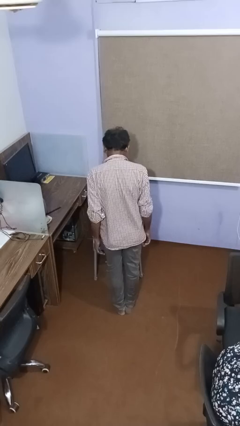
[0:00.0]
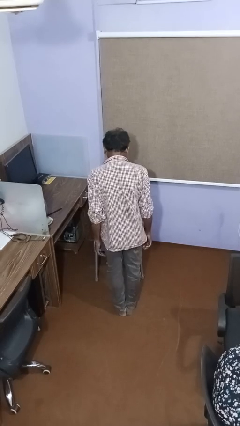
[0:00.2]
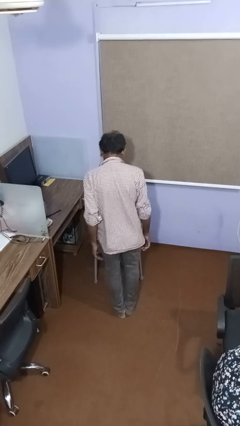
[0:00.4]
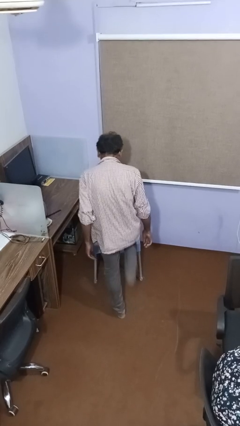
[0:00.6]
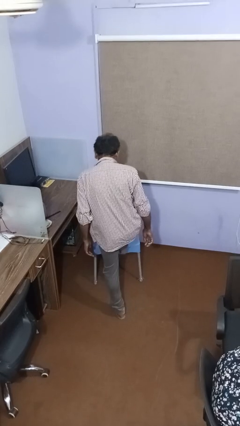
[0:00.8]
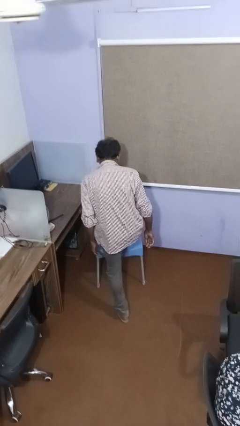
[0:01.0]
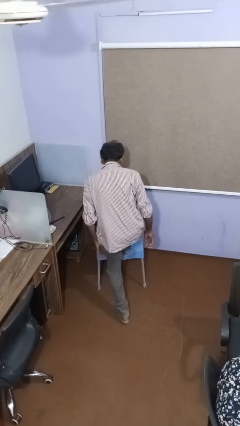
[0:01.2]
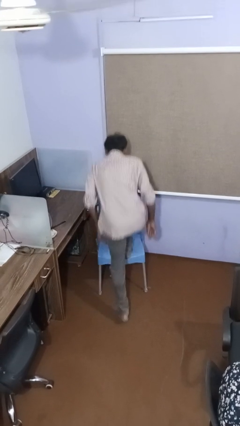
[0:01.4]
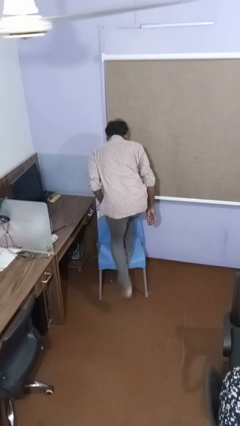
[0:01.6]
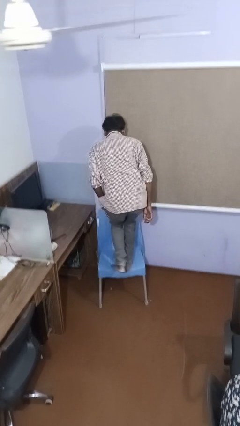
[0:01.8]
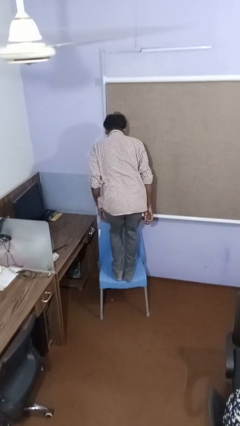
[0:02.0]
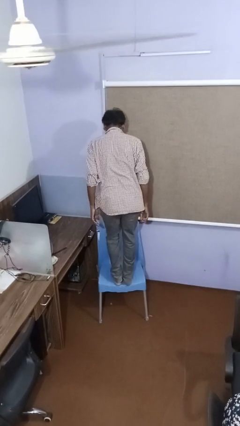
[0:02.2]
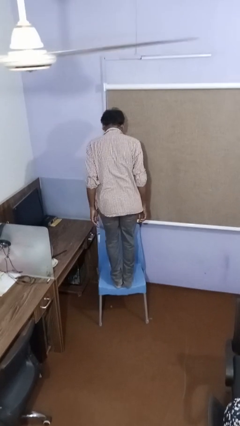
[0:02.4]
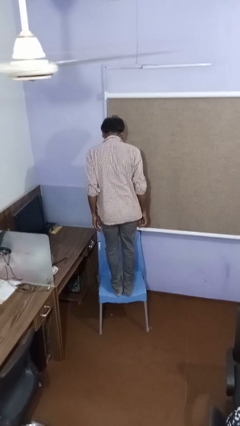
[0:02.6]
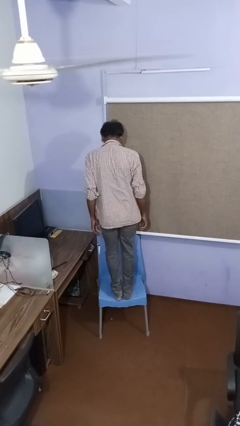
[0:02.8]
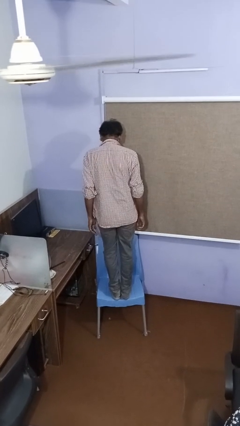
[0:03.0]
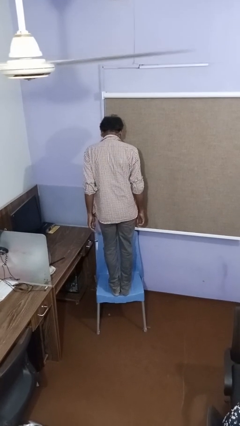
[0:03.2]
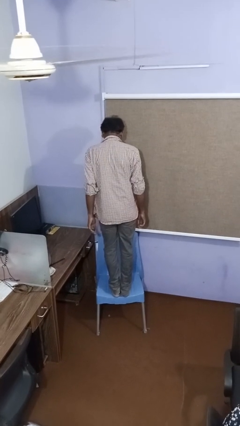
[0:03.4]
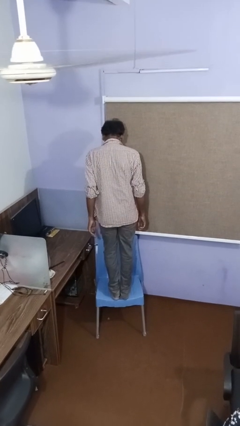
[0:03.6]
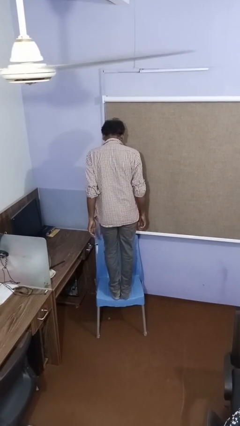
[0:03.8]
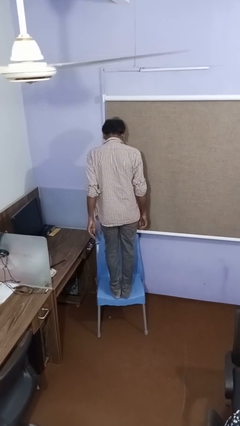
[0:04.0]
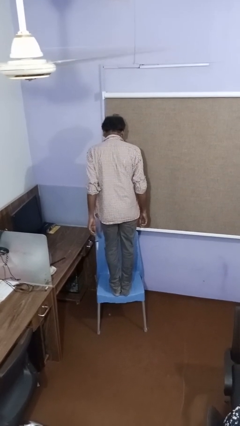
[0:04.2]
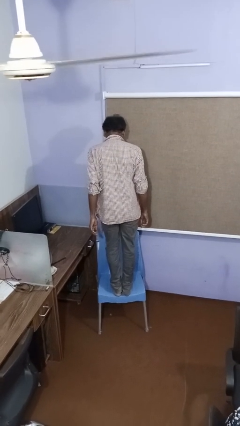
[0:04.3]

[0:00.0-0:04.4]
person climbs on chair

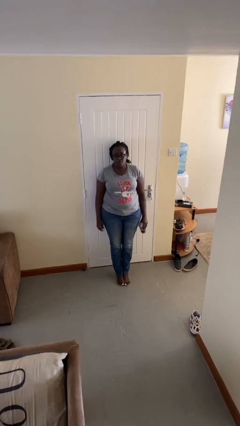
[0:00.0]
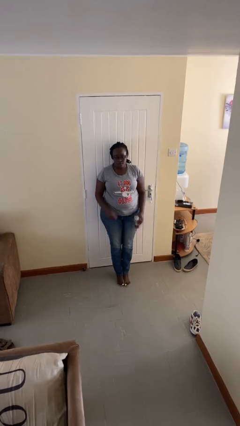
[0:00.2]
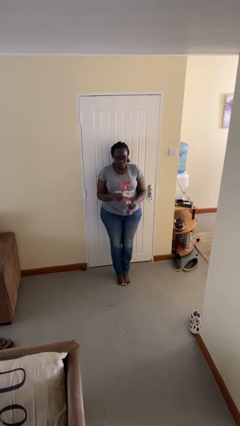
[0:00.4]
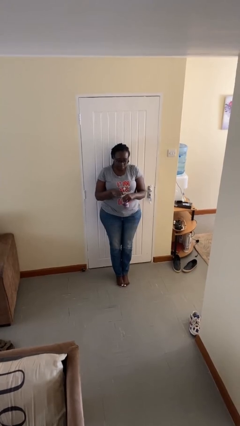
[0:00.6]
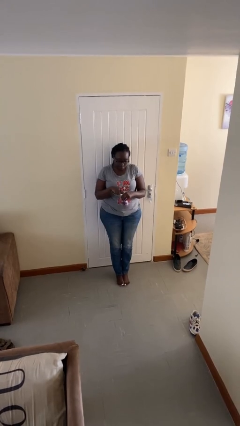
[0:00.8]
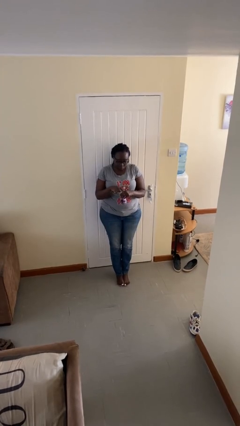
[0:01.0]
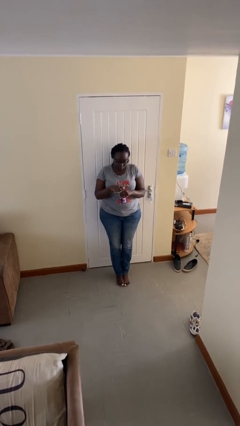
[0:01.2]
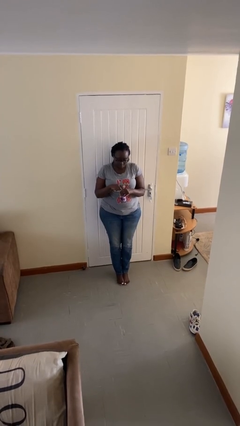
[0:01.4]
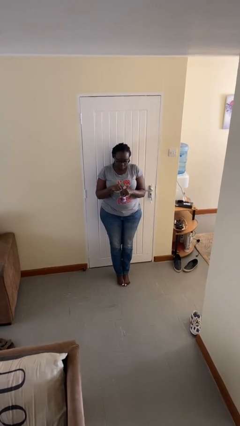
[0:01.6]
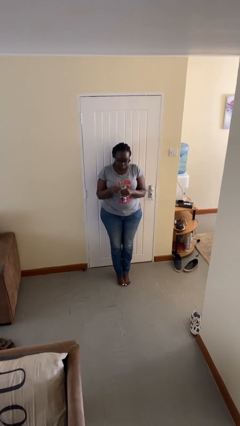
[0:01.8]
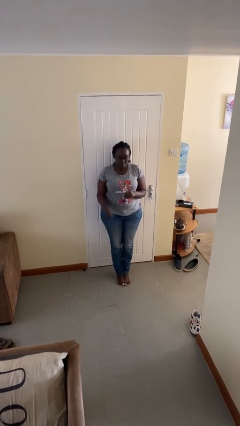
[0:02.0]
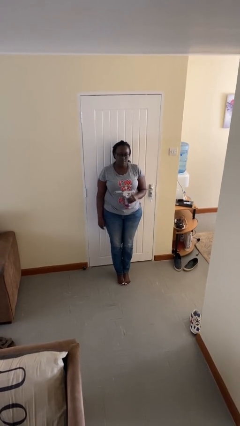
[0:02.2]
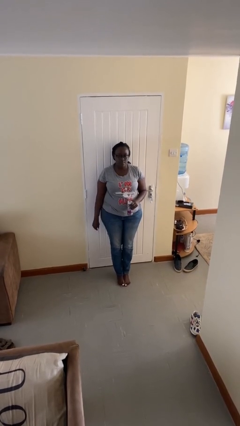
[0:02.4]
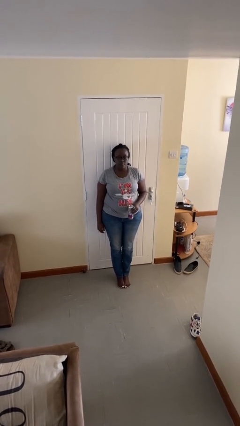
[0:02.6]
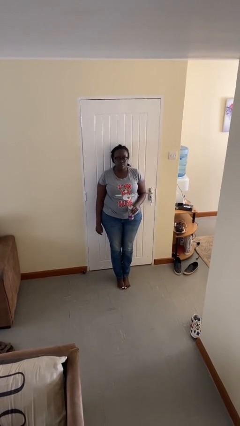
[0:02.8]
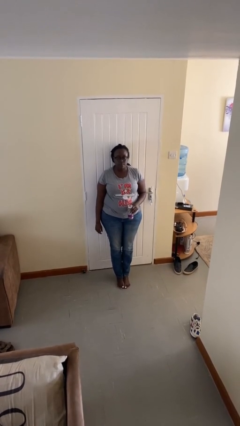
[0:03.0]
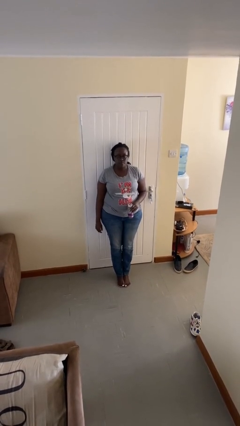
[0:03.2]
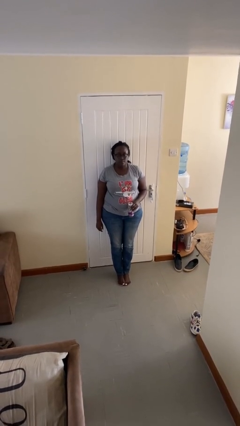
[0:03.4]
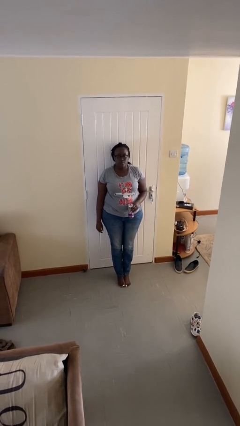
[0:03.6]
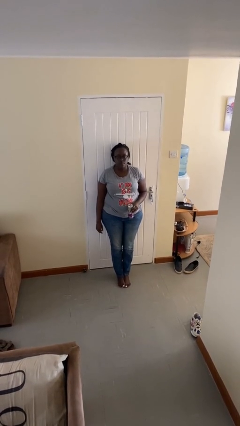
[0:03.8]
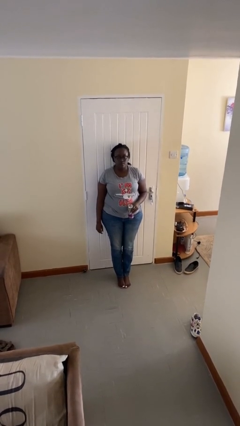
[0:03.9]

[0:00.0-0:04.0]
person opens beverage can

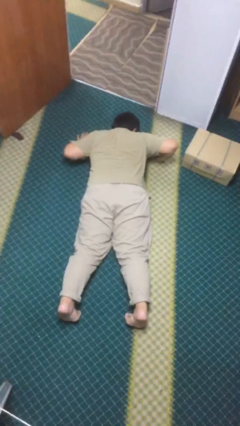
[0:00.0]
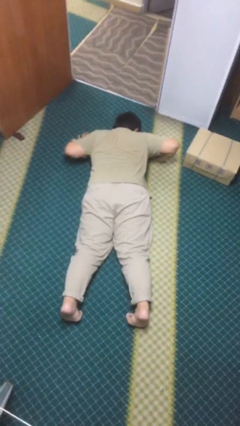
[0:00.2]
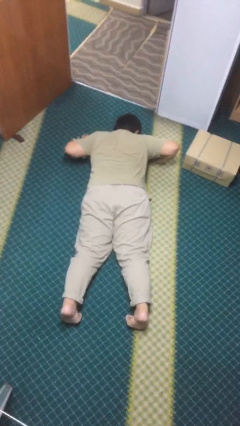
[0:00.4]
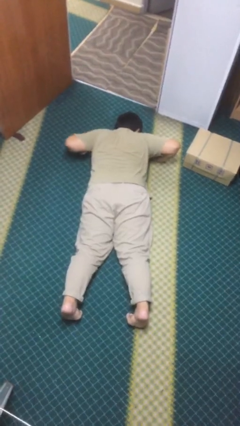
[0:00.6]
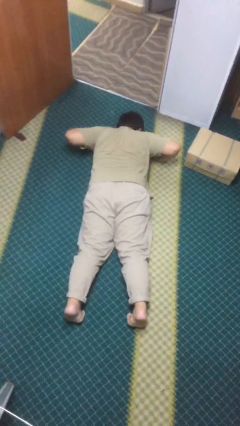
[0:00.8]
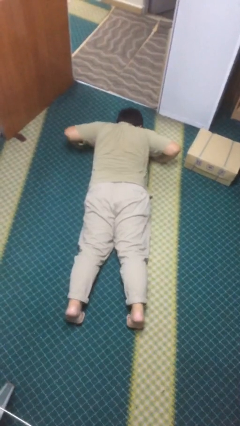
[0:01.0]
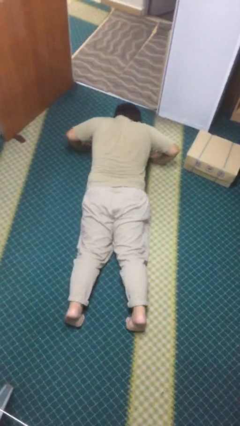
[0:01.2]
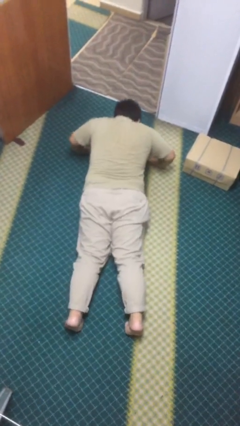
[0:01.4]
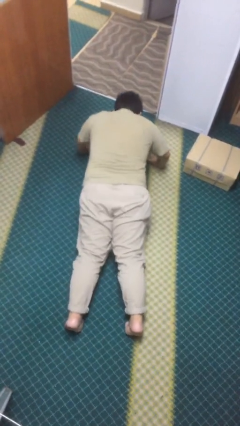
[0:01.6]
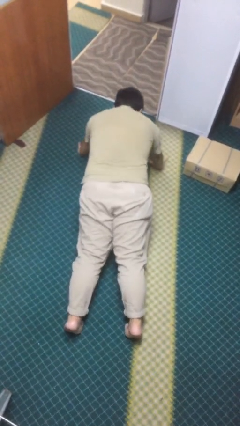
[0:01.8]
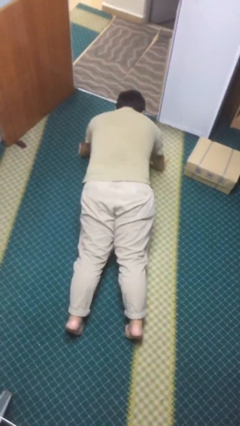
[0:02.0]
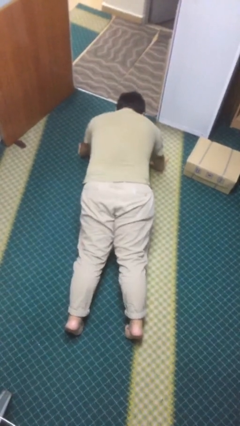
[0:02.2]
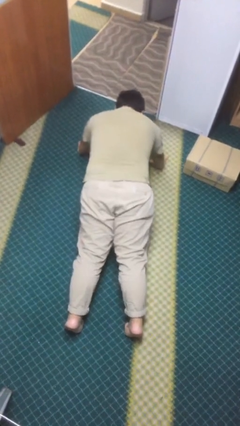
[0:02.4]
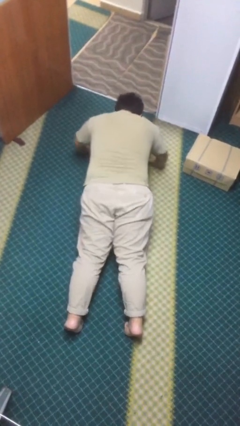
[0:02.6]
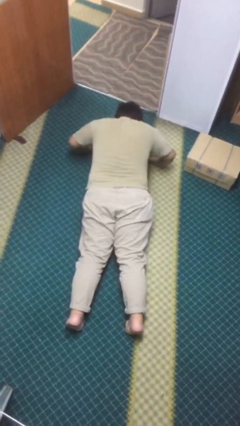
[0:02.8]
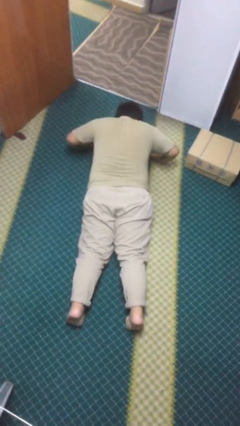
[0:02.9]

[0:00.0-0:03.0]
person exercises with pushup

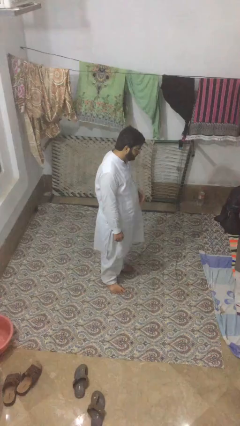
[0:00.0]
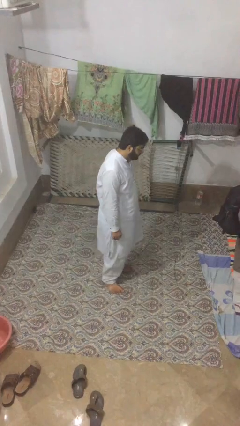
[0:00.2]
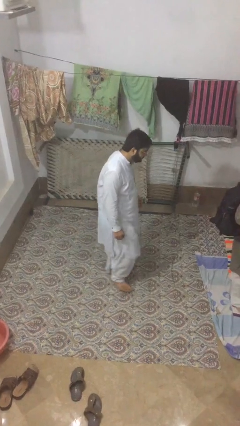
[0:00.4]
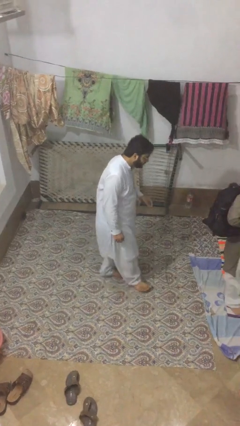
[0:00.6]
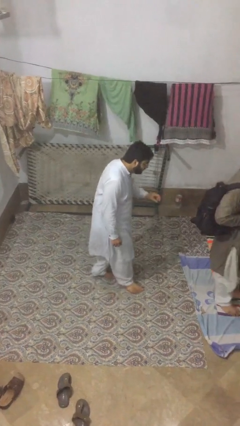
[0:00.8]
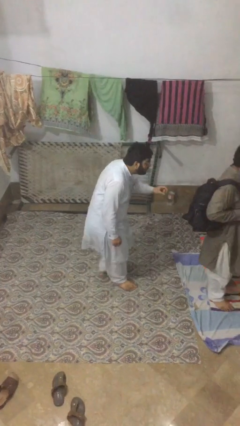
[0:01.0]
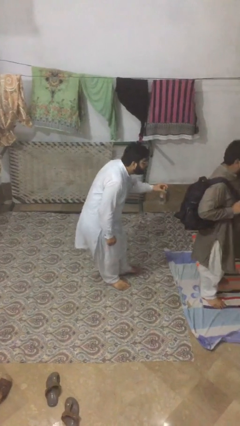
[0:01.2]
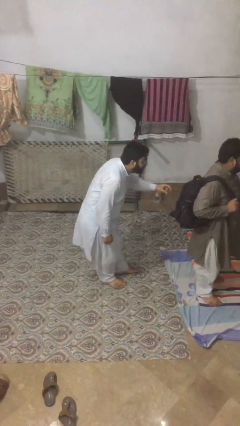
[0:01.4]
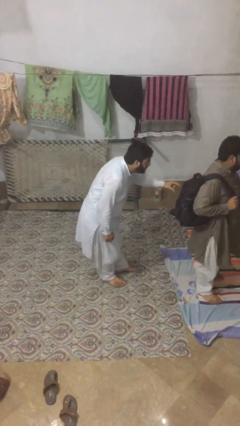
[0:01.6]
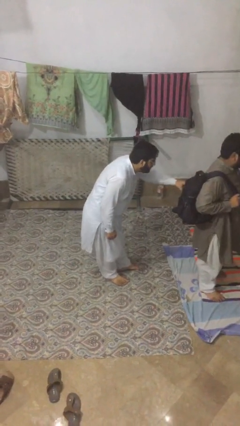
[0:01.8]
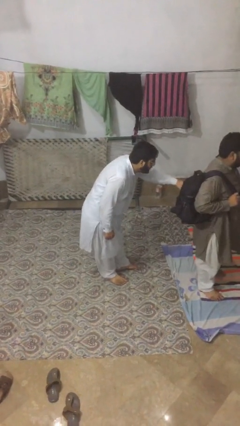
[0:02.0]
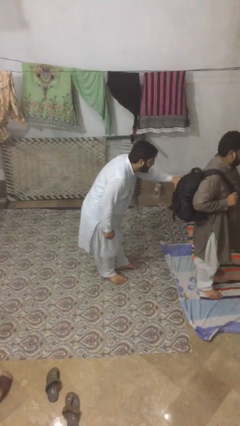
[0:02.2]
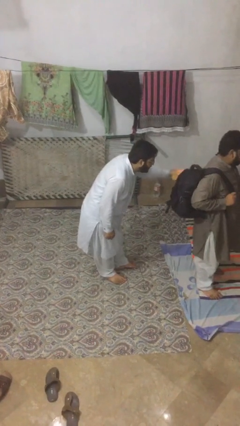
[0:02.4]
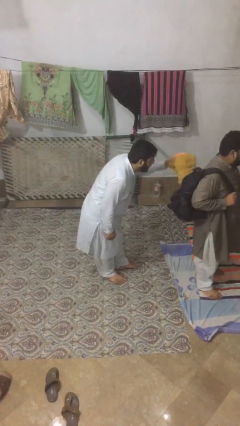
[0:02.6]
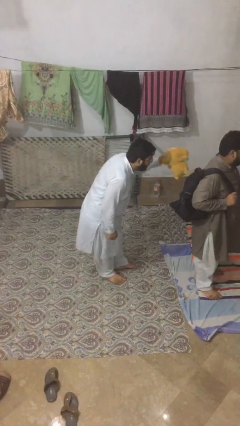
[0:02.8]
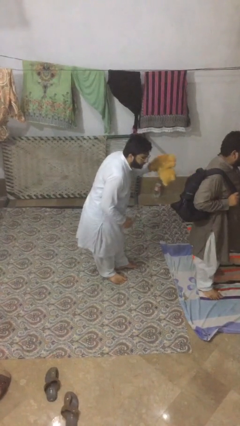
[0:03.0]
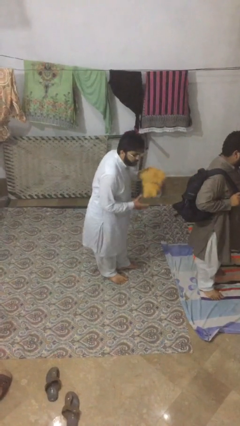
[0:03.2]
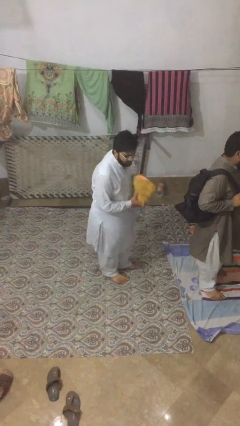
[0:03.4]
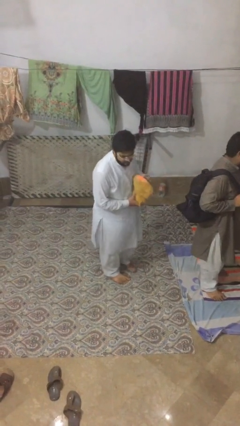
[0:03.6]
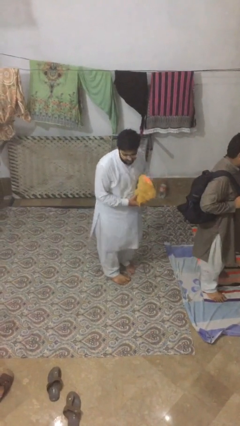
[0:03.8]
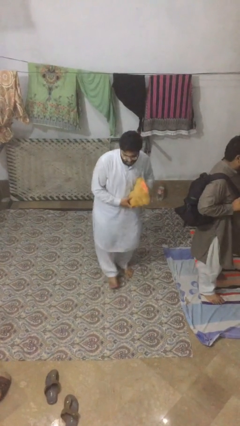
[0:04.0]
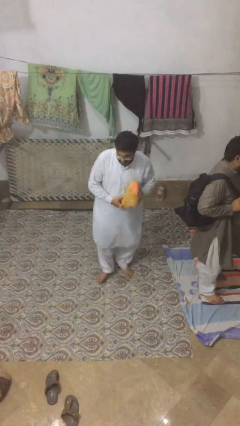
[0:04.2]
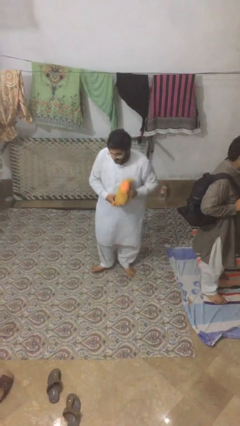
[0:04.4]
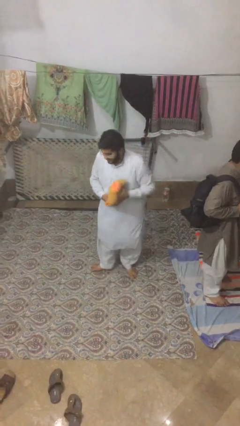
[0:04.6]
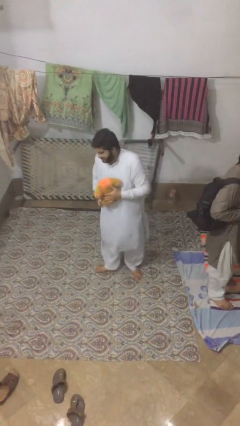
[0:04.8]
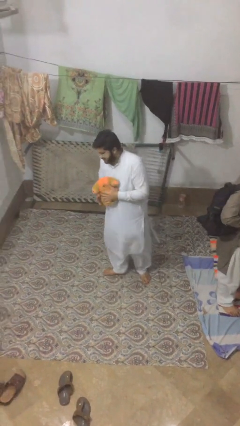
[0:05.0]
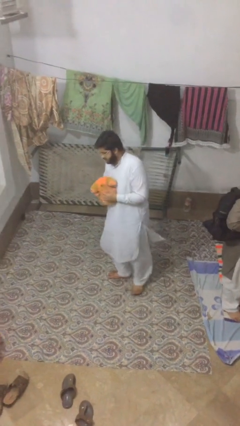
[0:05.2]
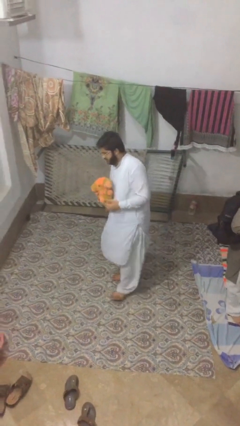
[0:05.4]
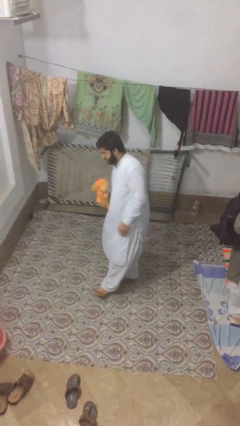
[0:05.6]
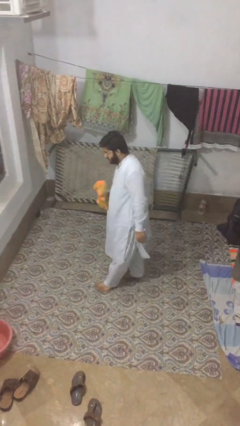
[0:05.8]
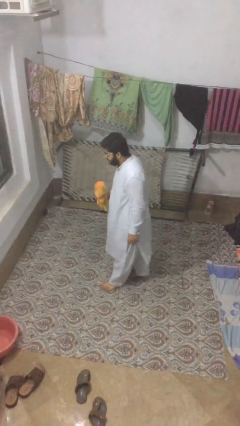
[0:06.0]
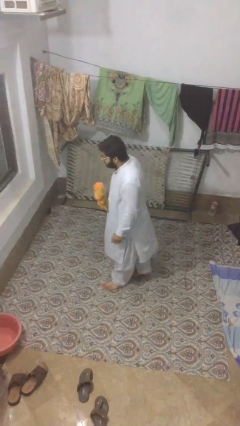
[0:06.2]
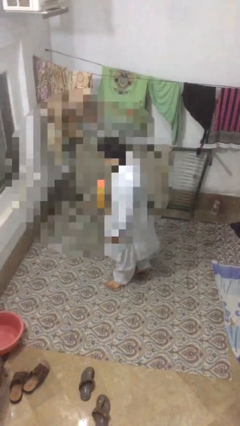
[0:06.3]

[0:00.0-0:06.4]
person steals object from person
